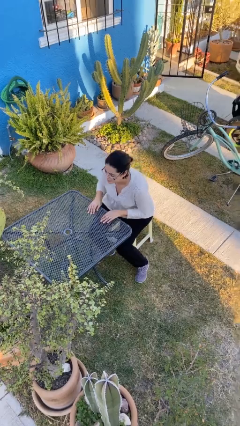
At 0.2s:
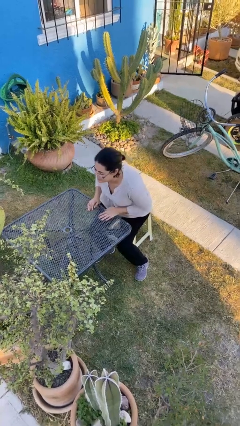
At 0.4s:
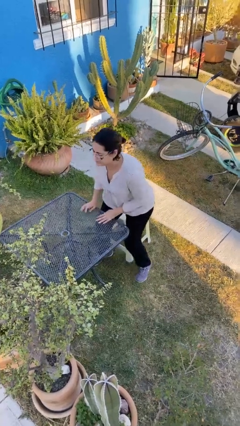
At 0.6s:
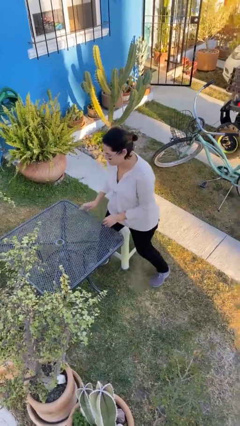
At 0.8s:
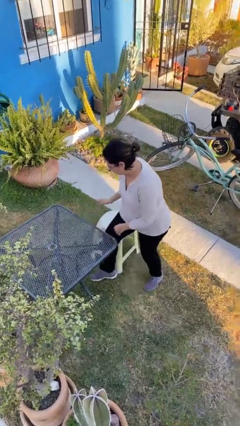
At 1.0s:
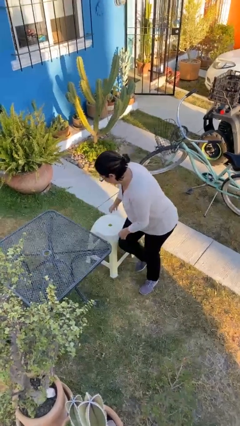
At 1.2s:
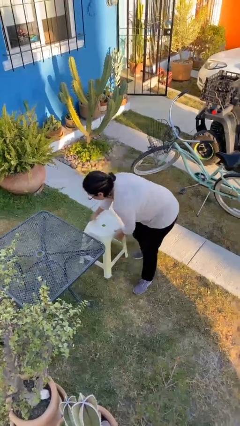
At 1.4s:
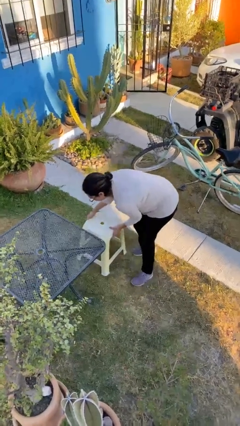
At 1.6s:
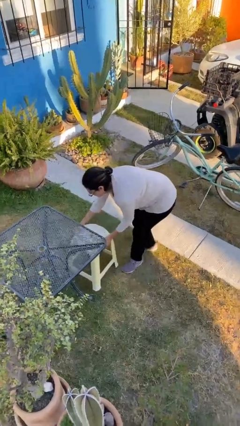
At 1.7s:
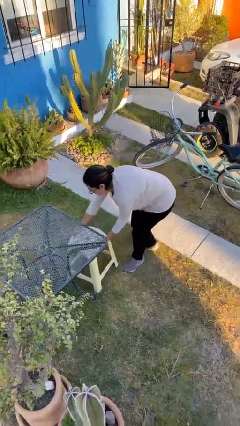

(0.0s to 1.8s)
person stands up

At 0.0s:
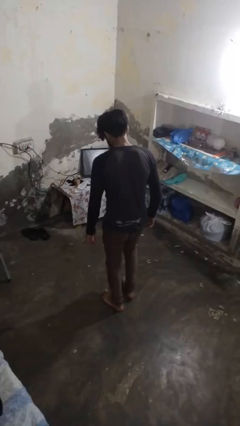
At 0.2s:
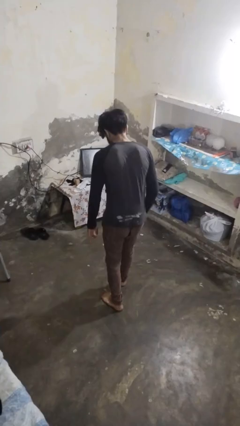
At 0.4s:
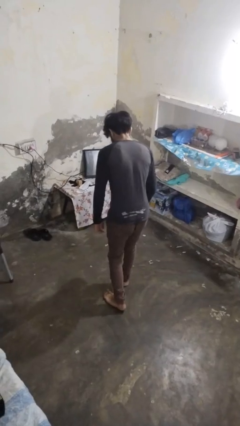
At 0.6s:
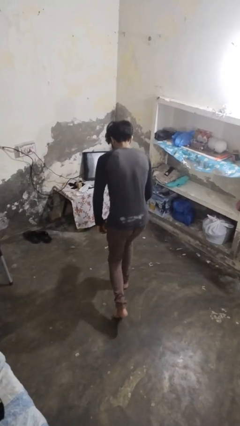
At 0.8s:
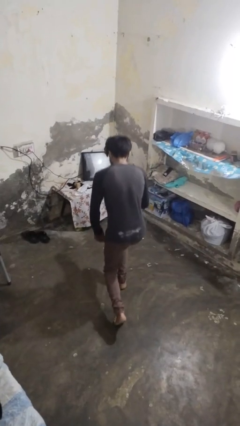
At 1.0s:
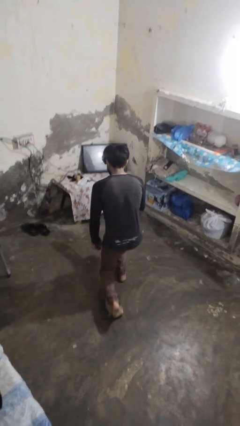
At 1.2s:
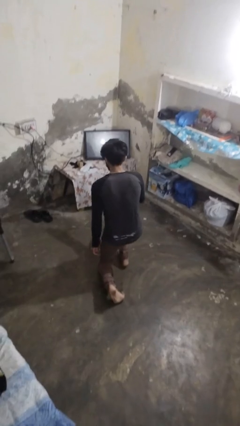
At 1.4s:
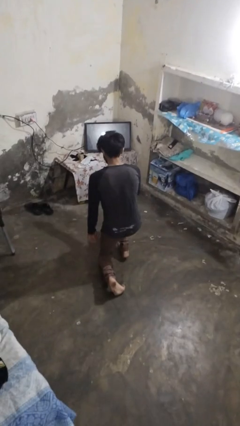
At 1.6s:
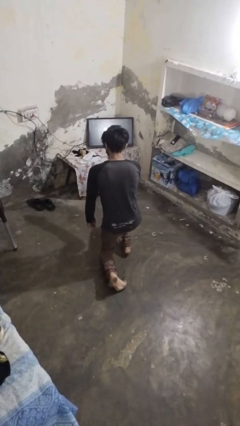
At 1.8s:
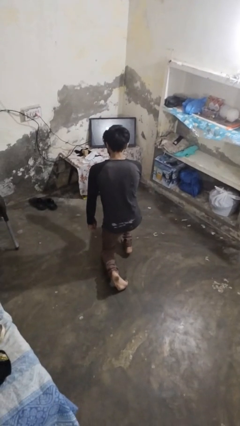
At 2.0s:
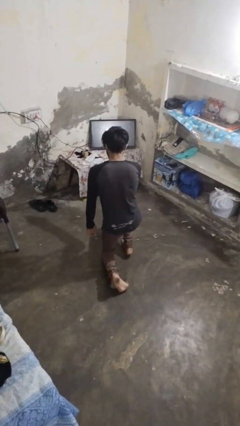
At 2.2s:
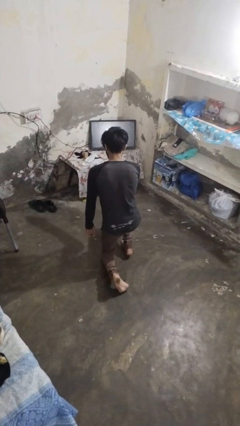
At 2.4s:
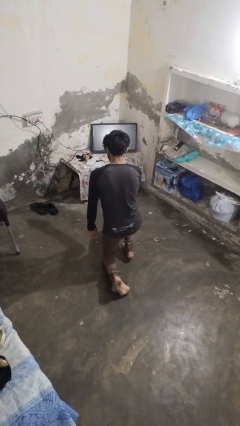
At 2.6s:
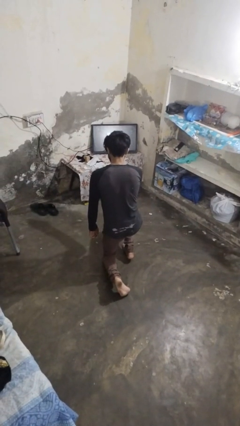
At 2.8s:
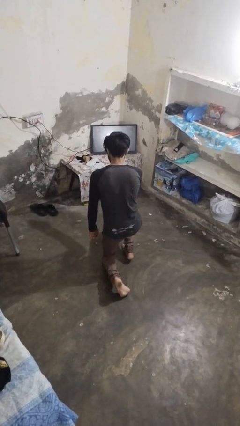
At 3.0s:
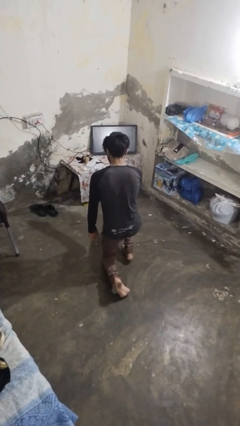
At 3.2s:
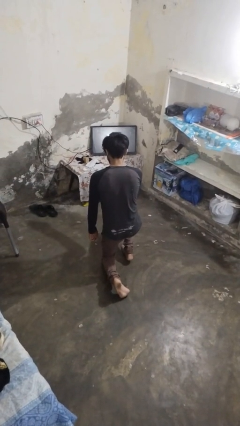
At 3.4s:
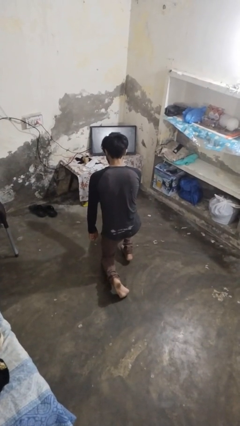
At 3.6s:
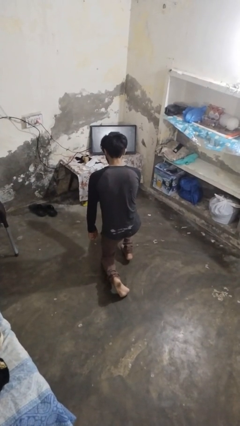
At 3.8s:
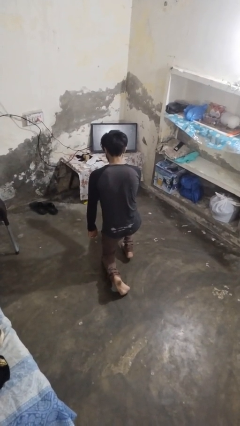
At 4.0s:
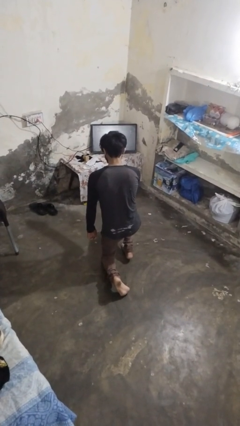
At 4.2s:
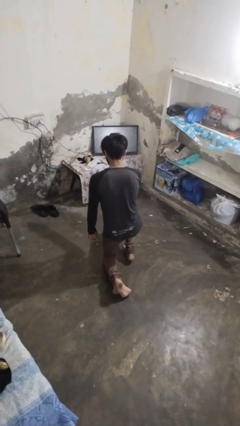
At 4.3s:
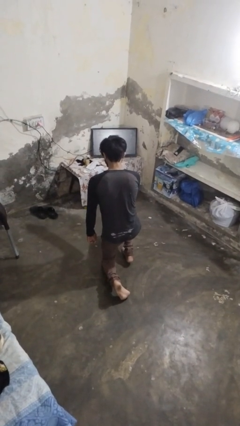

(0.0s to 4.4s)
person kneels

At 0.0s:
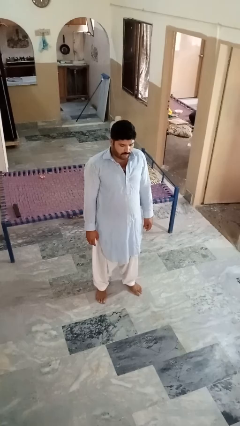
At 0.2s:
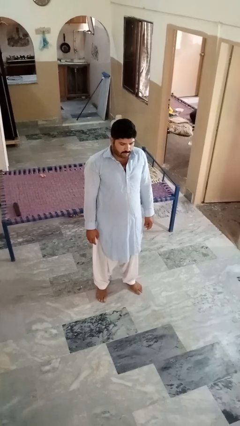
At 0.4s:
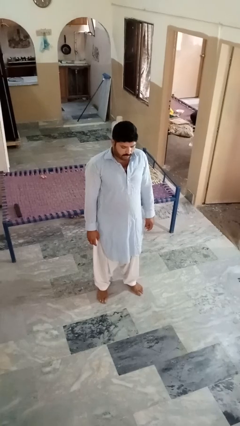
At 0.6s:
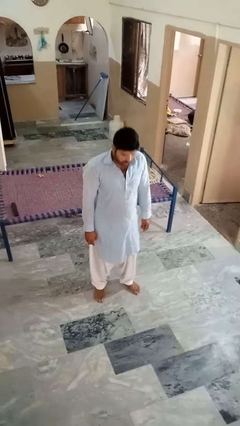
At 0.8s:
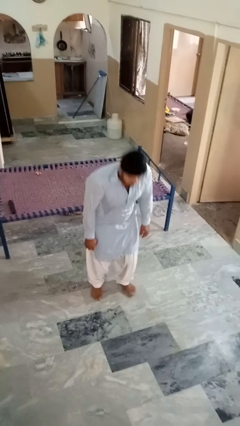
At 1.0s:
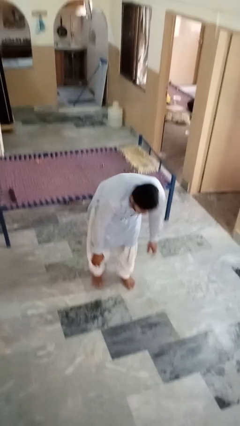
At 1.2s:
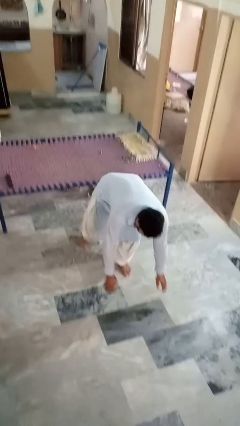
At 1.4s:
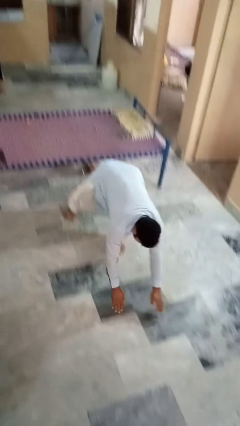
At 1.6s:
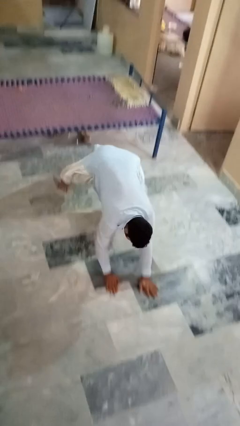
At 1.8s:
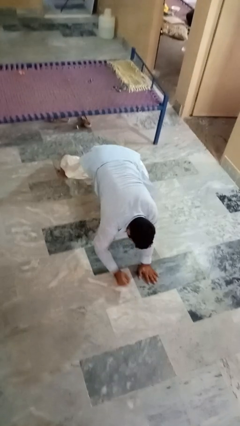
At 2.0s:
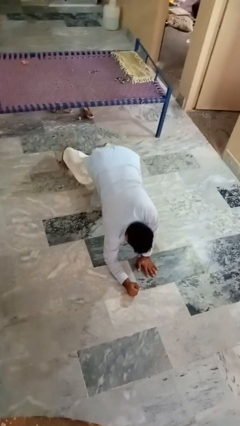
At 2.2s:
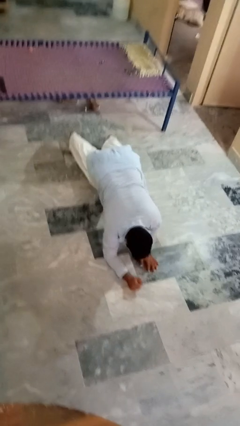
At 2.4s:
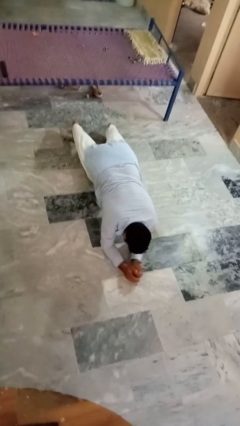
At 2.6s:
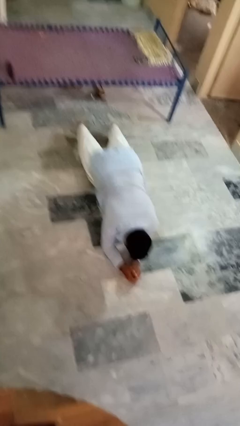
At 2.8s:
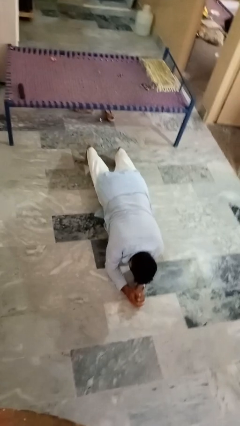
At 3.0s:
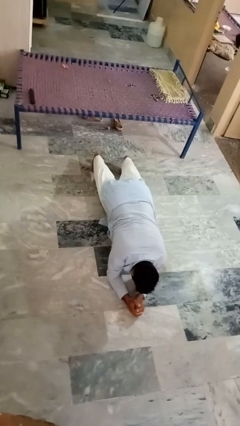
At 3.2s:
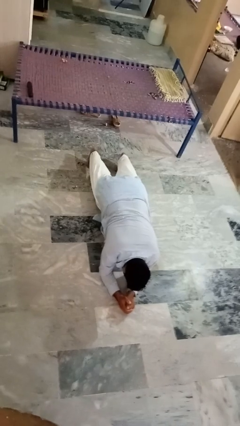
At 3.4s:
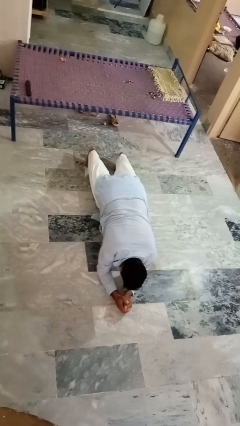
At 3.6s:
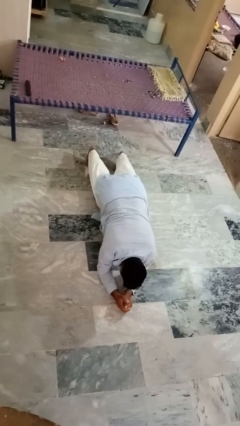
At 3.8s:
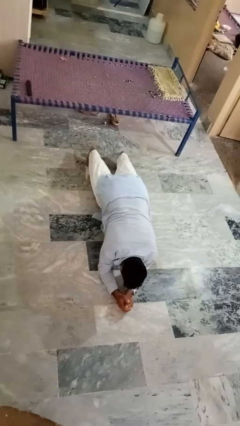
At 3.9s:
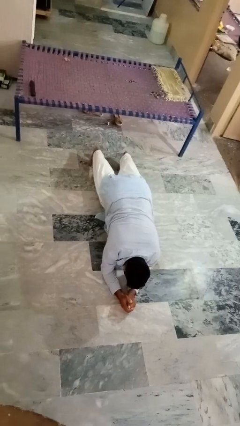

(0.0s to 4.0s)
person exercises with plank

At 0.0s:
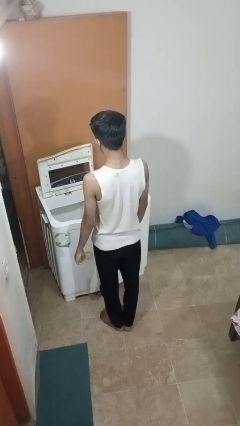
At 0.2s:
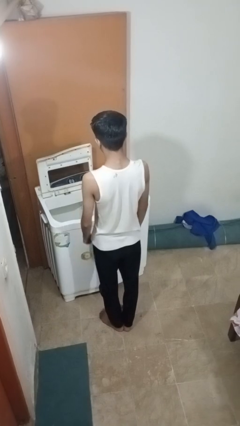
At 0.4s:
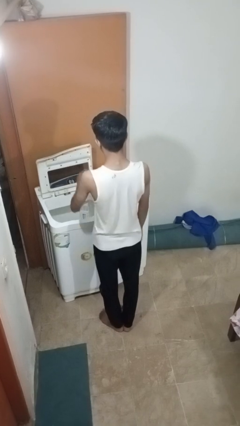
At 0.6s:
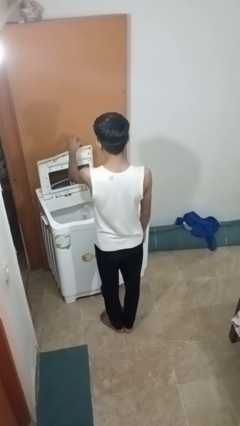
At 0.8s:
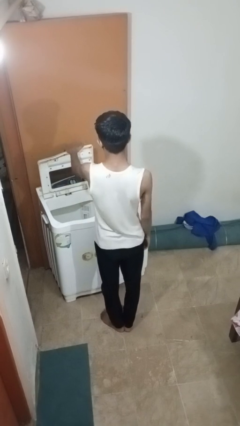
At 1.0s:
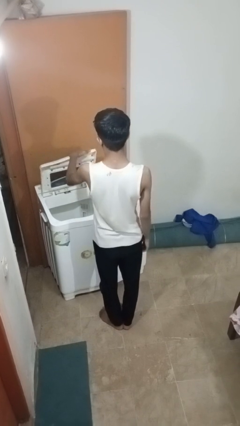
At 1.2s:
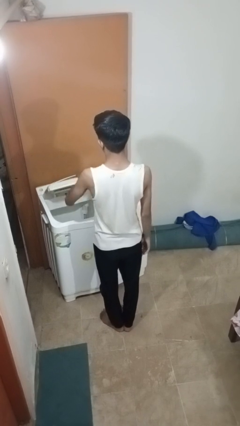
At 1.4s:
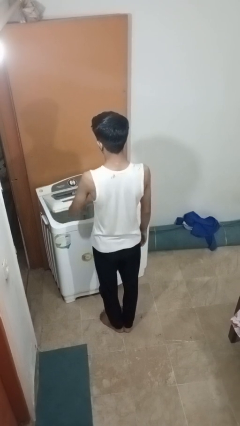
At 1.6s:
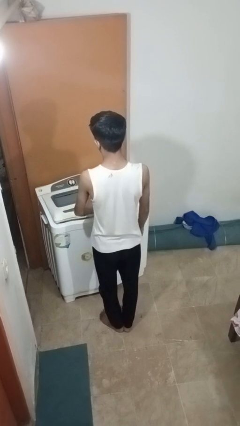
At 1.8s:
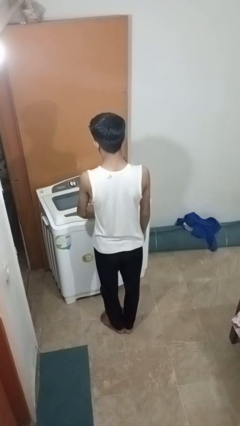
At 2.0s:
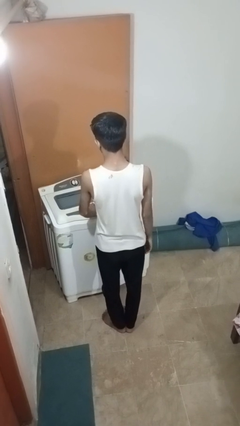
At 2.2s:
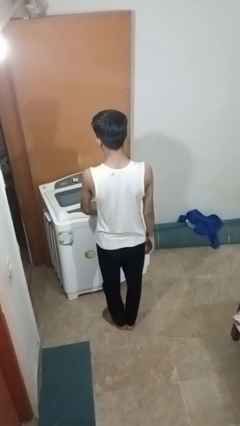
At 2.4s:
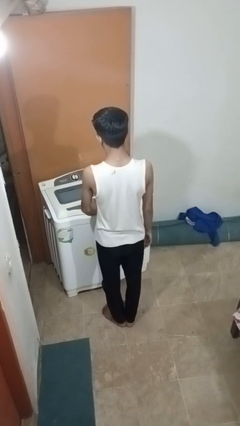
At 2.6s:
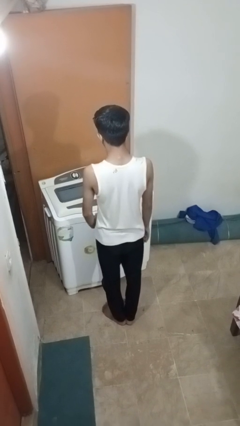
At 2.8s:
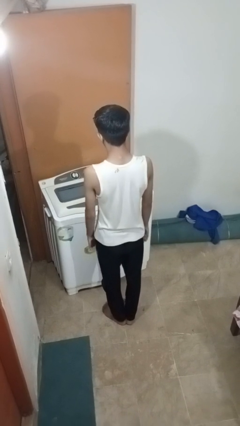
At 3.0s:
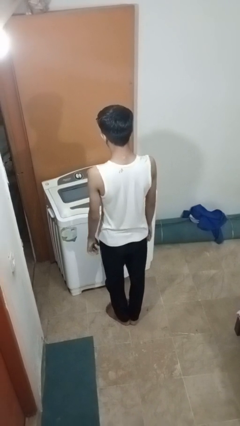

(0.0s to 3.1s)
person closes clothes washer

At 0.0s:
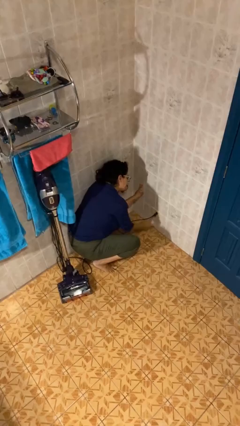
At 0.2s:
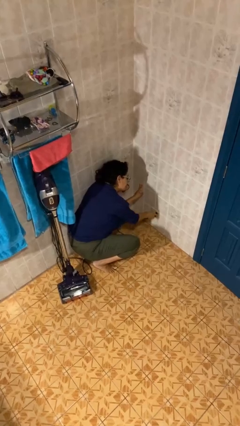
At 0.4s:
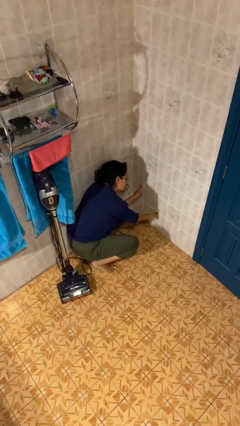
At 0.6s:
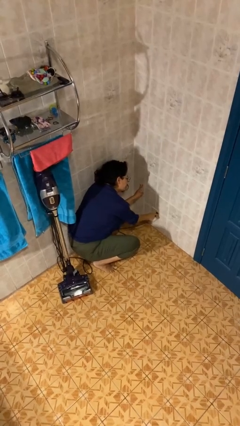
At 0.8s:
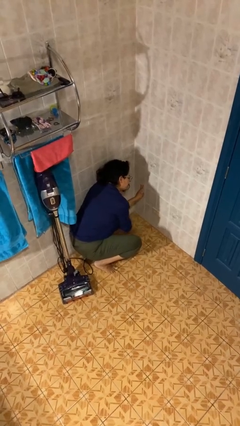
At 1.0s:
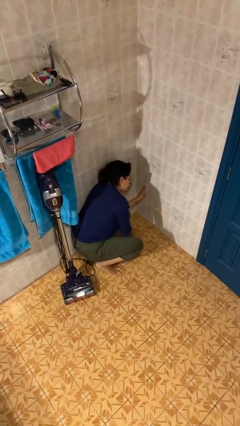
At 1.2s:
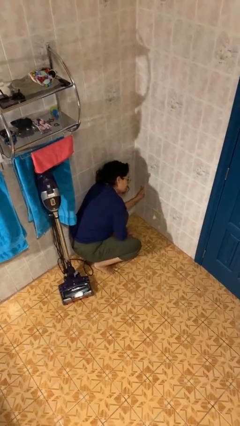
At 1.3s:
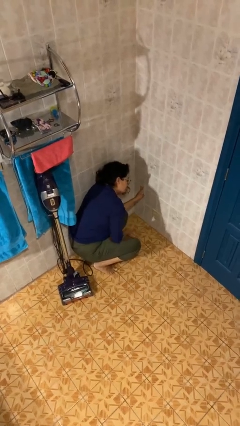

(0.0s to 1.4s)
person unplugs from electrical socket

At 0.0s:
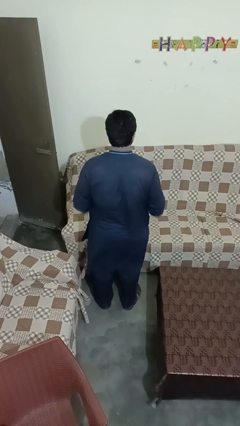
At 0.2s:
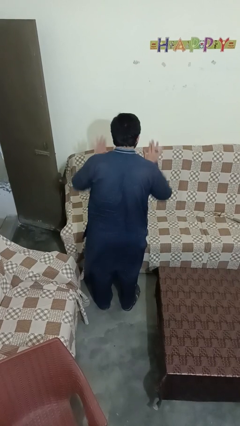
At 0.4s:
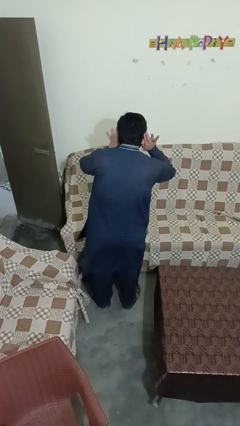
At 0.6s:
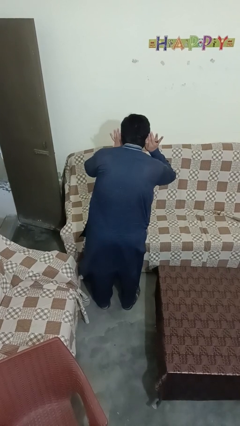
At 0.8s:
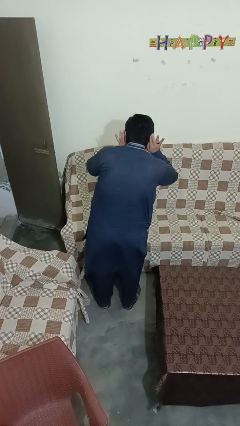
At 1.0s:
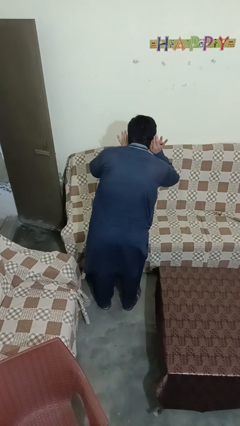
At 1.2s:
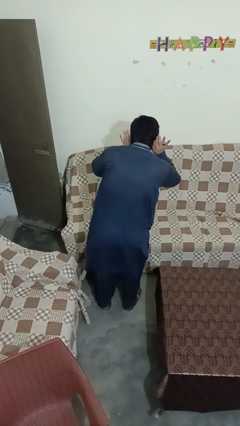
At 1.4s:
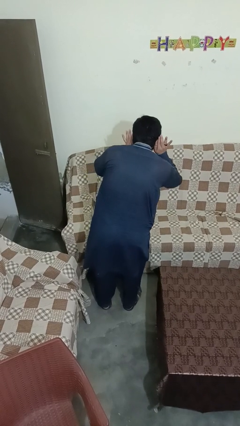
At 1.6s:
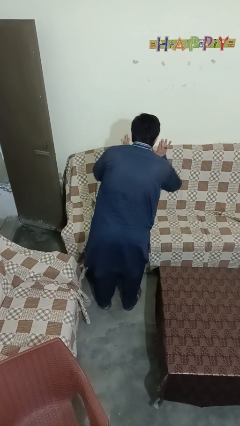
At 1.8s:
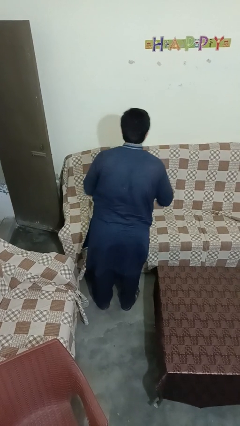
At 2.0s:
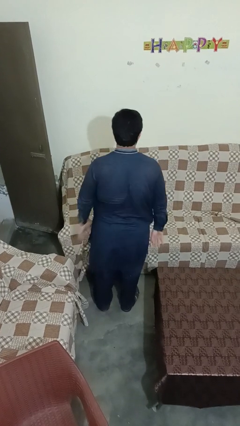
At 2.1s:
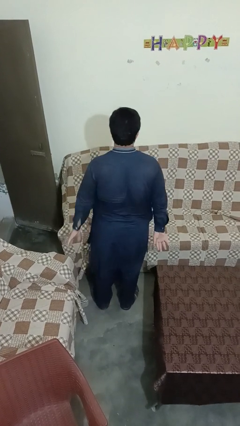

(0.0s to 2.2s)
person gestures listen closely

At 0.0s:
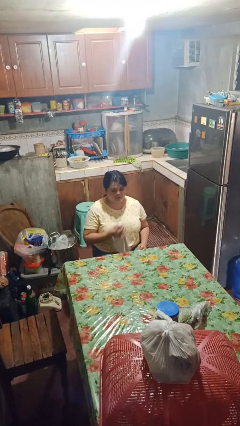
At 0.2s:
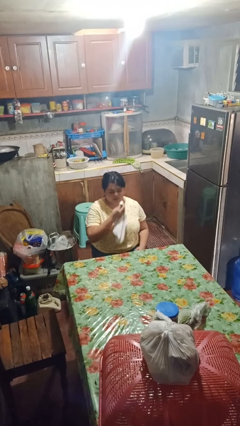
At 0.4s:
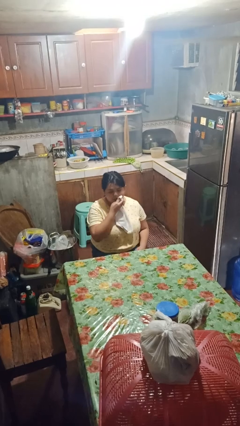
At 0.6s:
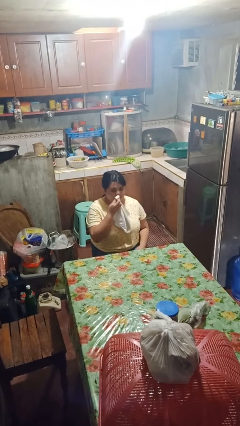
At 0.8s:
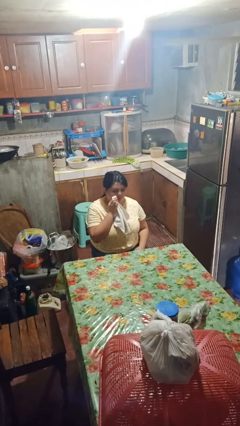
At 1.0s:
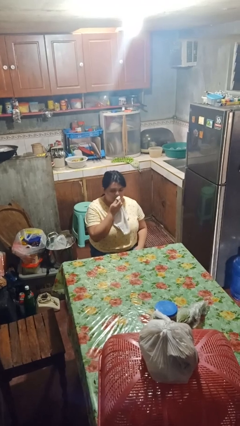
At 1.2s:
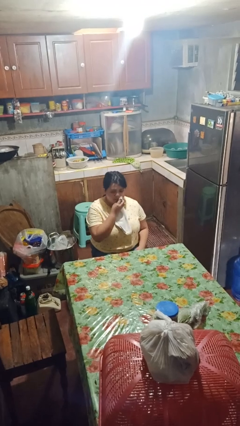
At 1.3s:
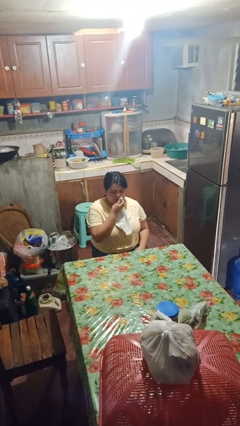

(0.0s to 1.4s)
person wipes mouth with napkin
